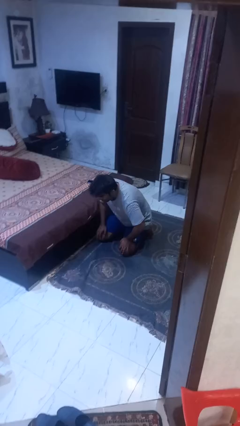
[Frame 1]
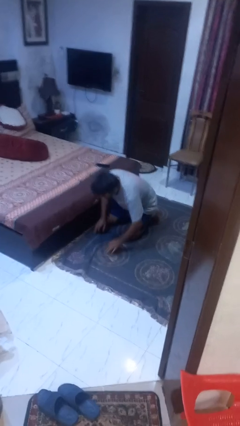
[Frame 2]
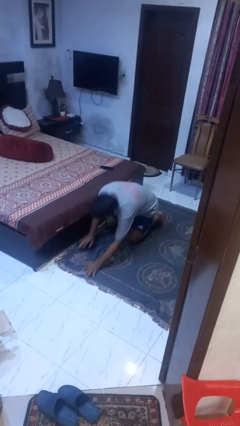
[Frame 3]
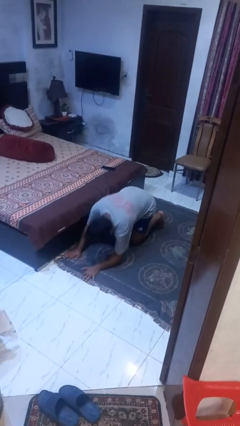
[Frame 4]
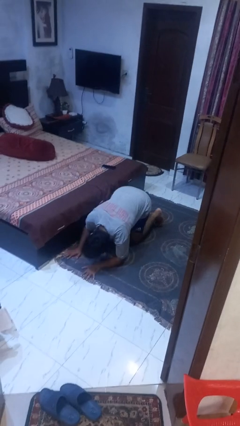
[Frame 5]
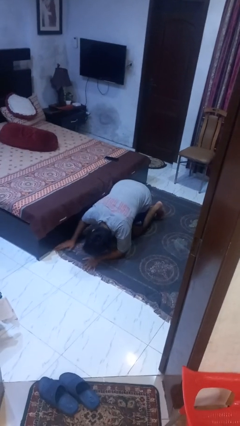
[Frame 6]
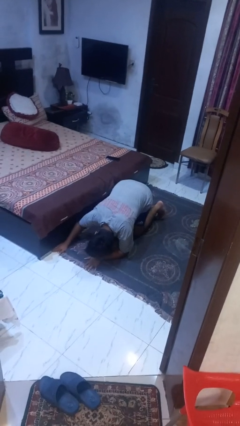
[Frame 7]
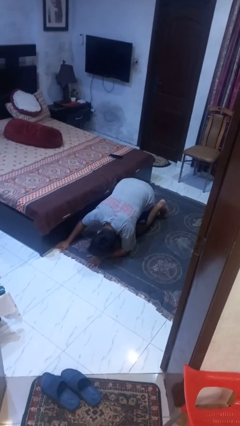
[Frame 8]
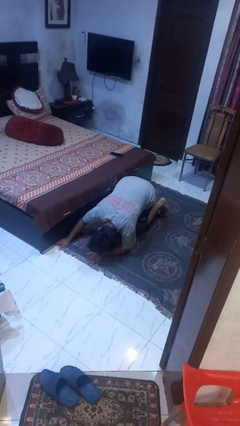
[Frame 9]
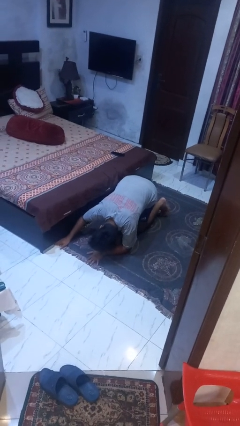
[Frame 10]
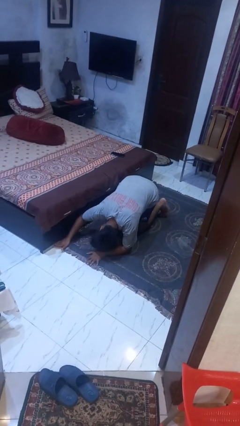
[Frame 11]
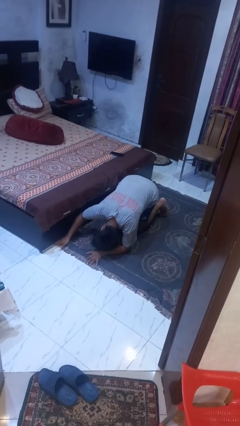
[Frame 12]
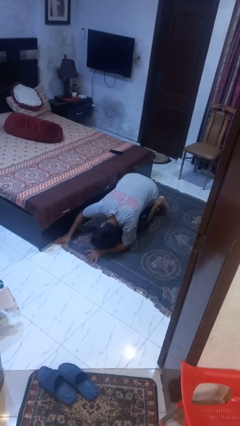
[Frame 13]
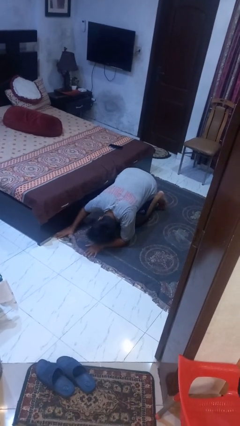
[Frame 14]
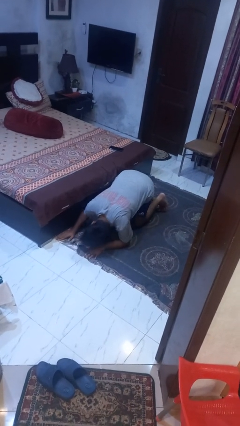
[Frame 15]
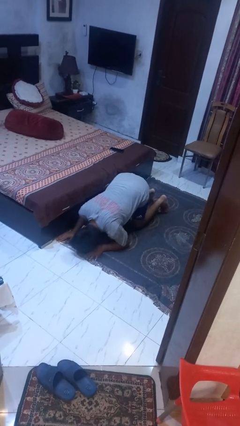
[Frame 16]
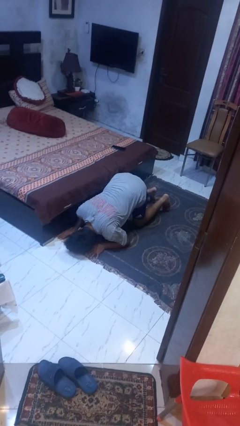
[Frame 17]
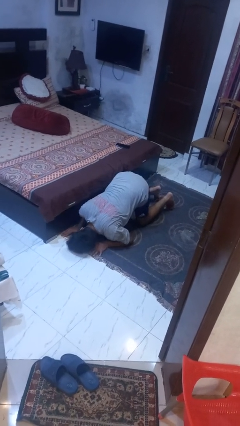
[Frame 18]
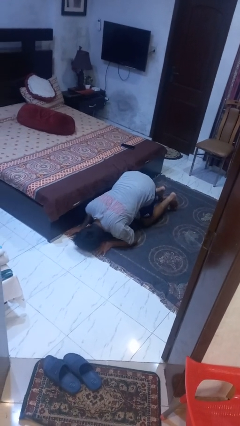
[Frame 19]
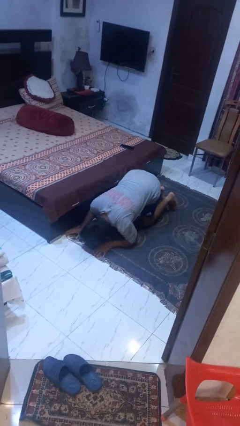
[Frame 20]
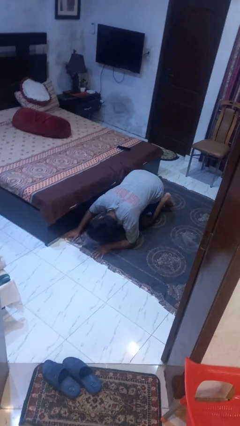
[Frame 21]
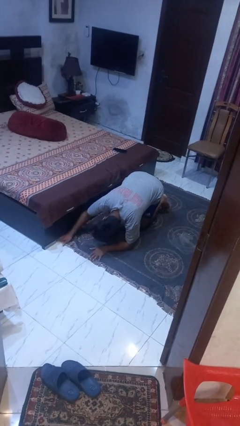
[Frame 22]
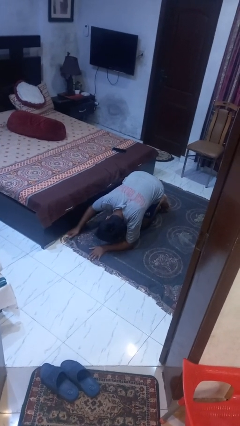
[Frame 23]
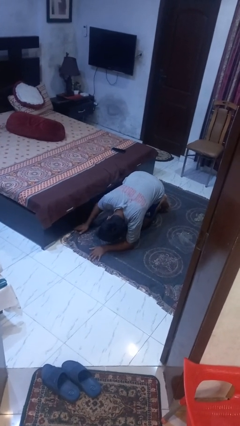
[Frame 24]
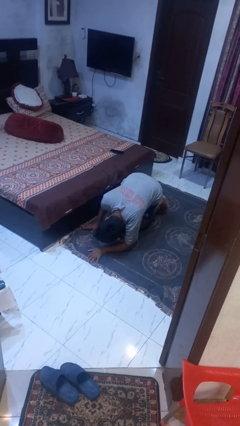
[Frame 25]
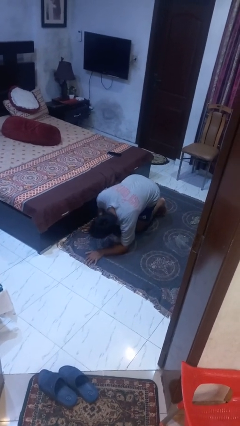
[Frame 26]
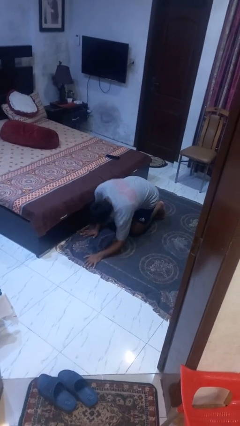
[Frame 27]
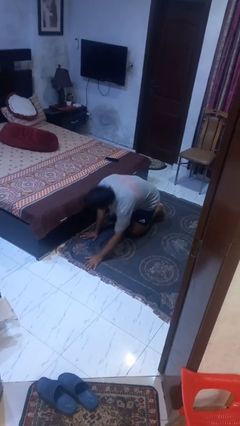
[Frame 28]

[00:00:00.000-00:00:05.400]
person searches under bed

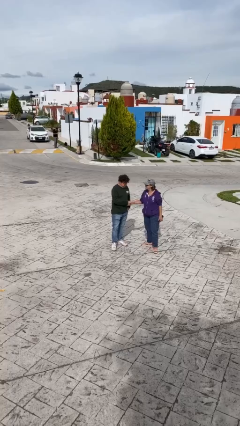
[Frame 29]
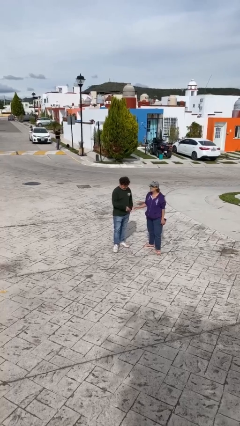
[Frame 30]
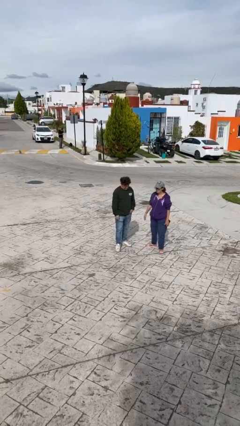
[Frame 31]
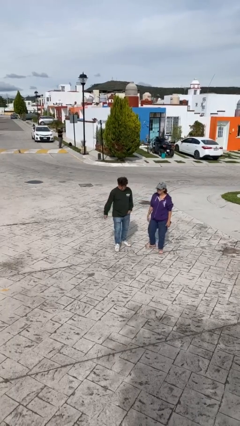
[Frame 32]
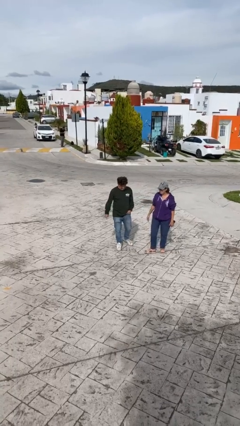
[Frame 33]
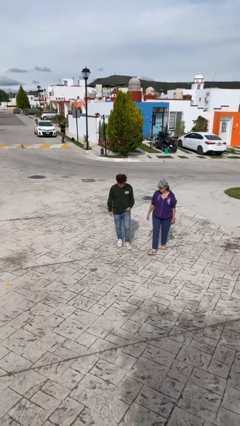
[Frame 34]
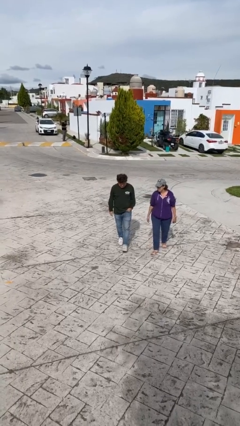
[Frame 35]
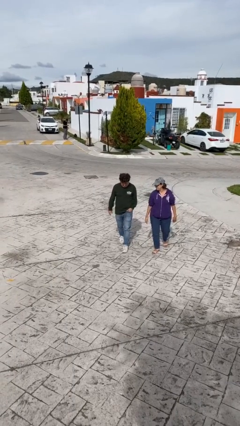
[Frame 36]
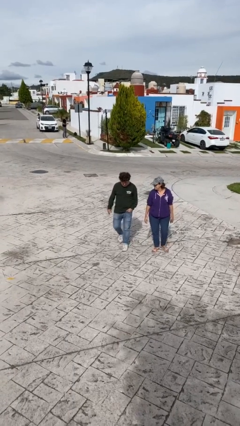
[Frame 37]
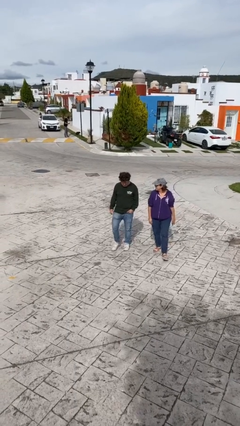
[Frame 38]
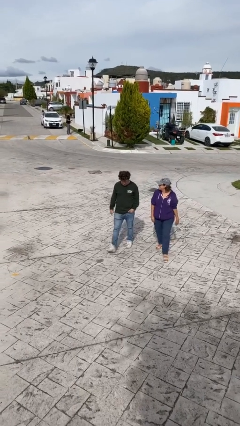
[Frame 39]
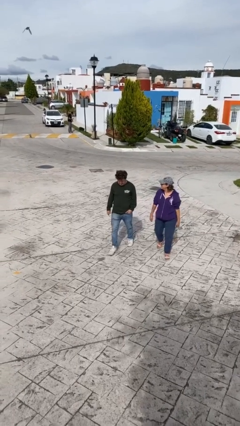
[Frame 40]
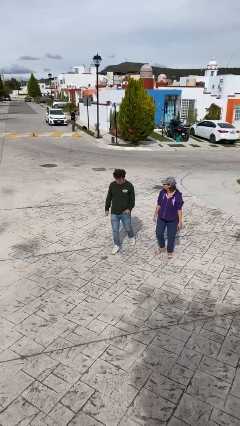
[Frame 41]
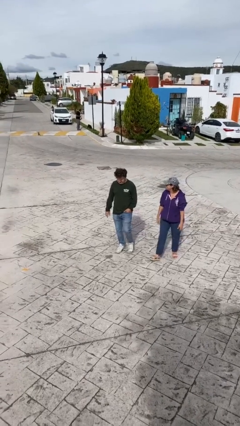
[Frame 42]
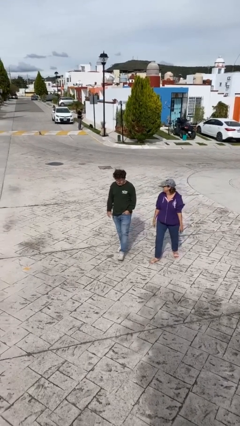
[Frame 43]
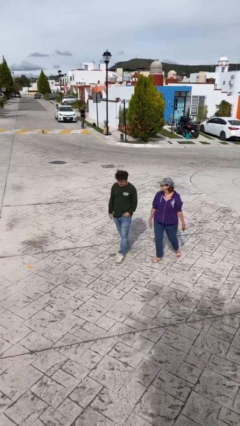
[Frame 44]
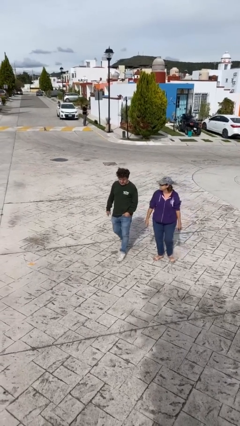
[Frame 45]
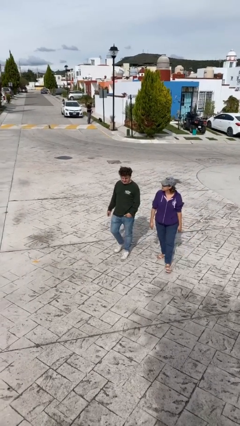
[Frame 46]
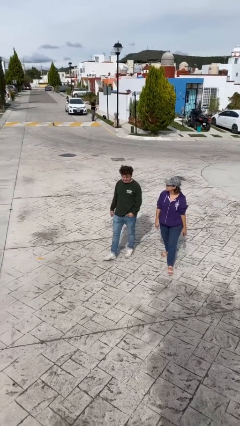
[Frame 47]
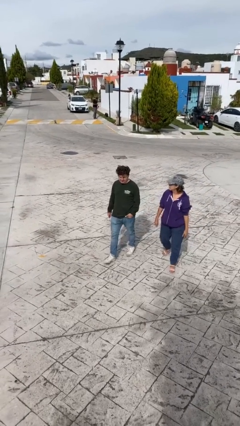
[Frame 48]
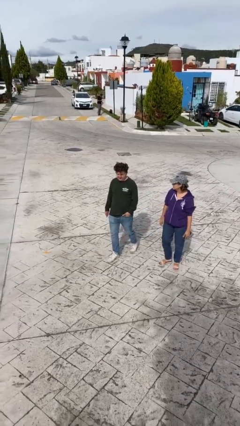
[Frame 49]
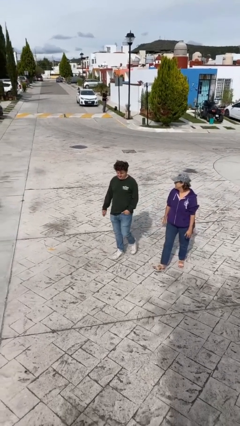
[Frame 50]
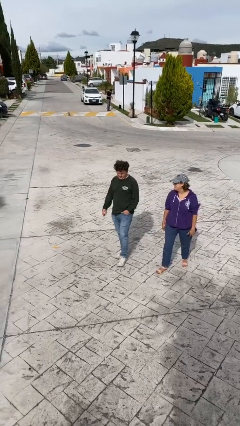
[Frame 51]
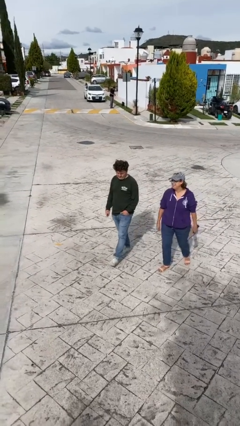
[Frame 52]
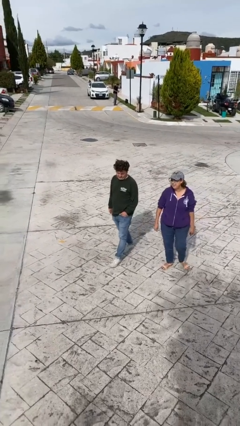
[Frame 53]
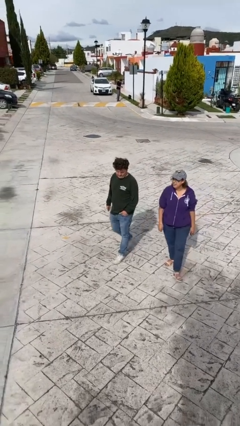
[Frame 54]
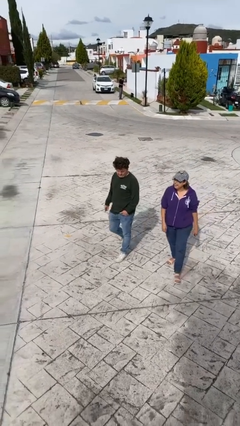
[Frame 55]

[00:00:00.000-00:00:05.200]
person talks to person

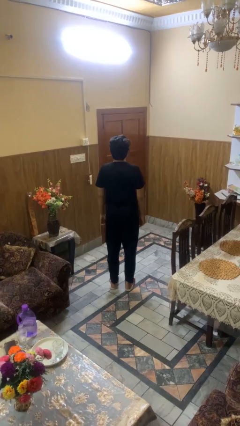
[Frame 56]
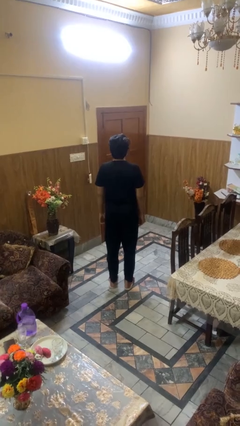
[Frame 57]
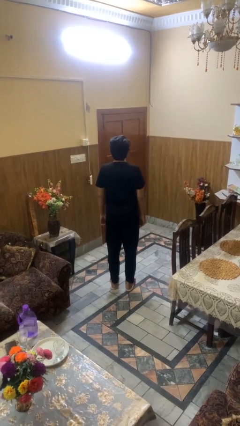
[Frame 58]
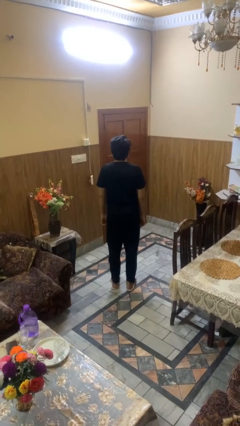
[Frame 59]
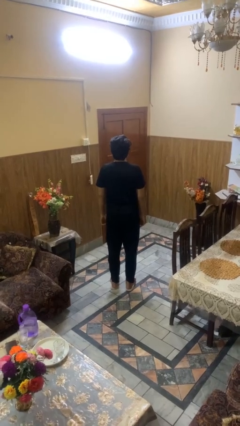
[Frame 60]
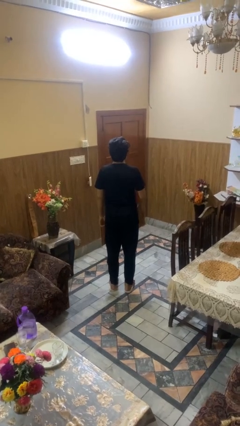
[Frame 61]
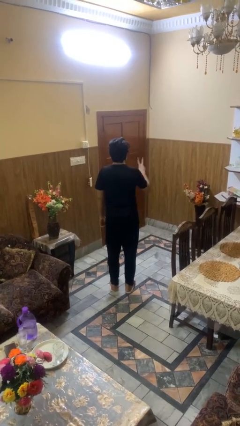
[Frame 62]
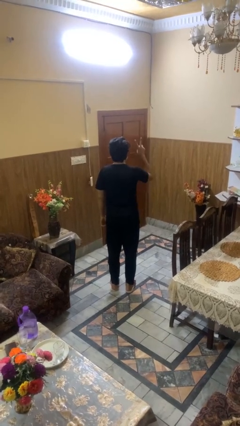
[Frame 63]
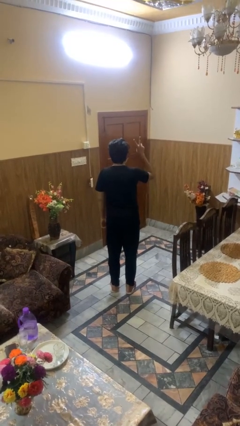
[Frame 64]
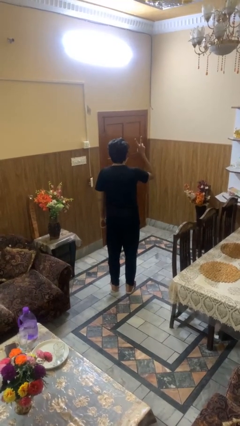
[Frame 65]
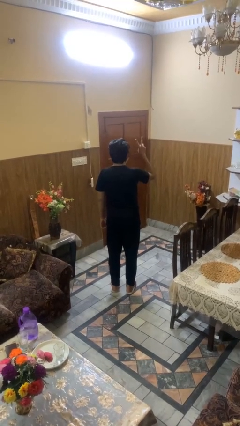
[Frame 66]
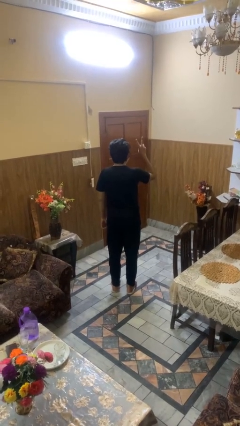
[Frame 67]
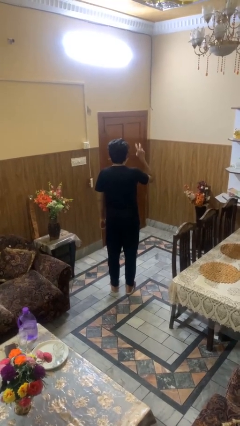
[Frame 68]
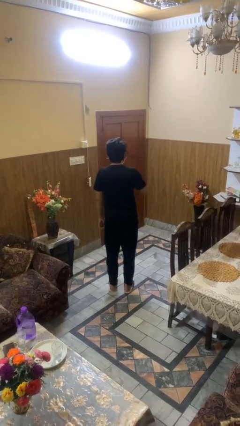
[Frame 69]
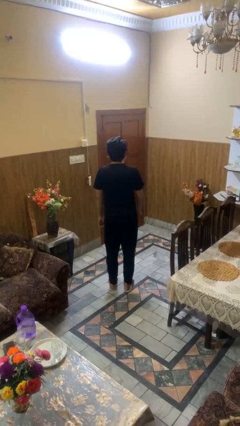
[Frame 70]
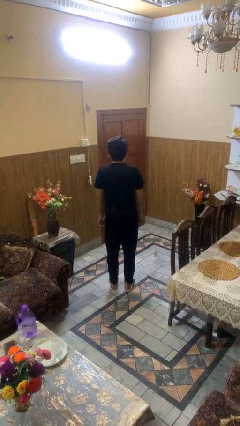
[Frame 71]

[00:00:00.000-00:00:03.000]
person gestures peace

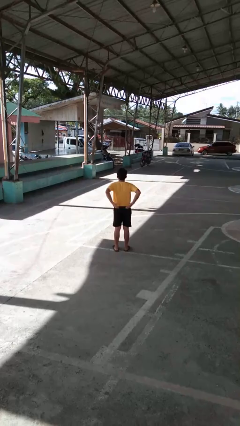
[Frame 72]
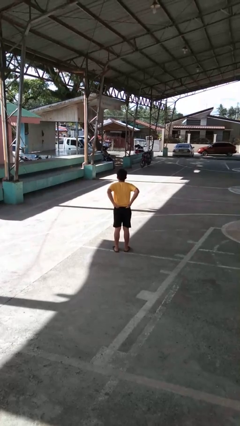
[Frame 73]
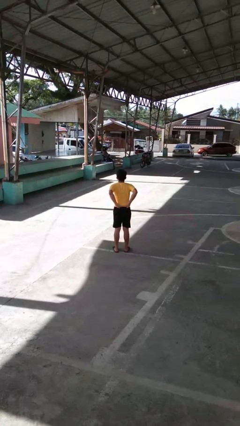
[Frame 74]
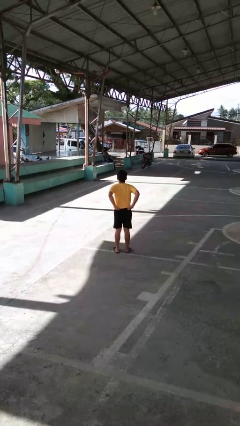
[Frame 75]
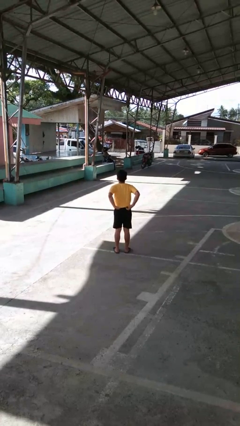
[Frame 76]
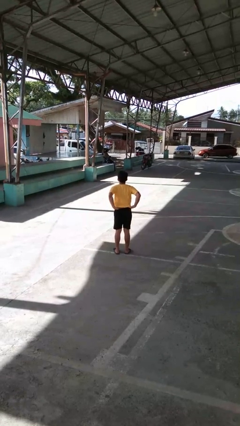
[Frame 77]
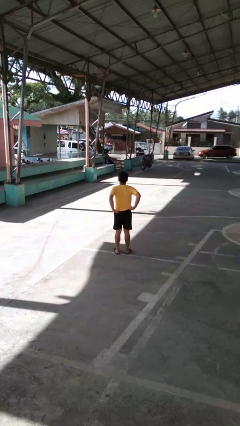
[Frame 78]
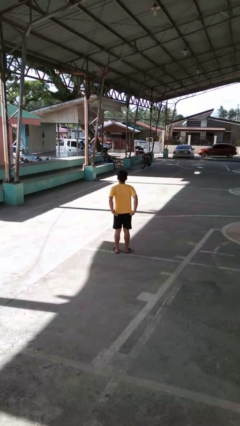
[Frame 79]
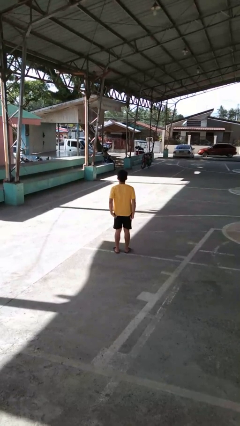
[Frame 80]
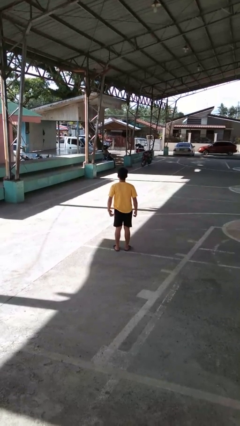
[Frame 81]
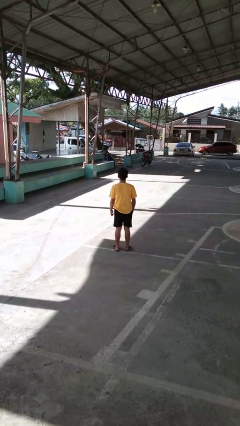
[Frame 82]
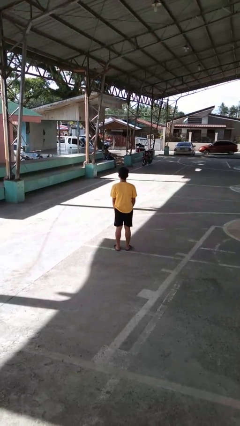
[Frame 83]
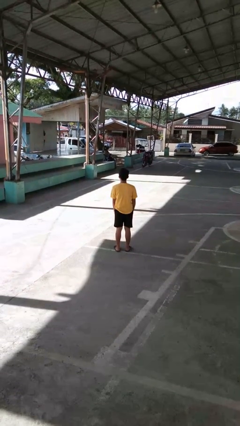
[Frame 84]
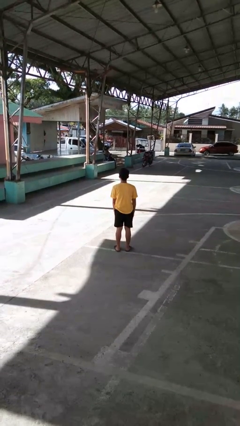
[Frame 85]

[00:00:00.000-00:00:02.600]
person untucks shirt

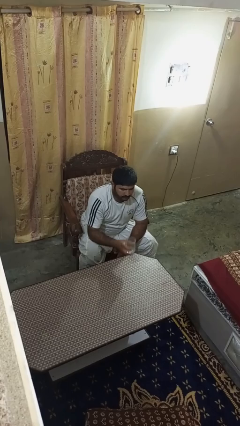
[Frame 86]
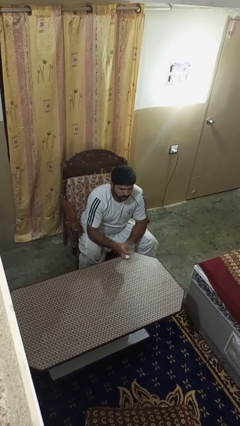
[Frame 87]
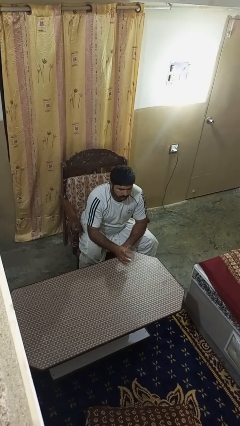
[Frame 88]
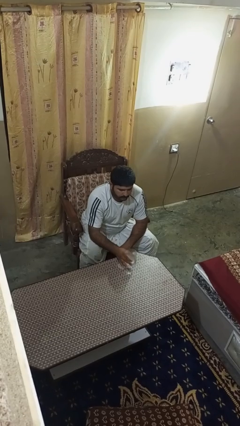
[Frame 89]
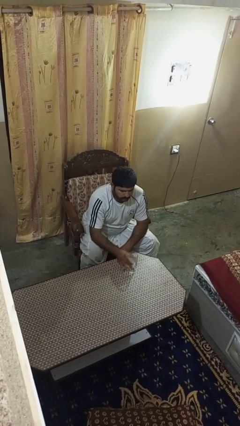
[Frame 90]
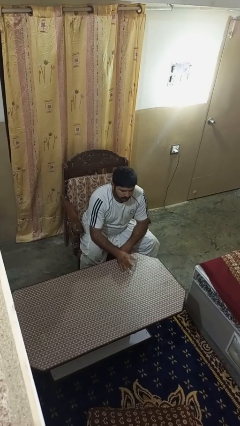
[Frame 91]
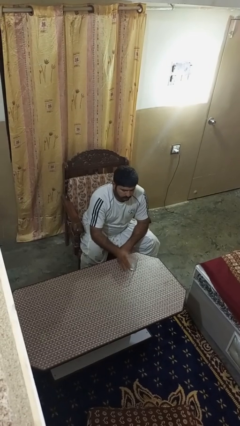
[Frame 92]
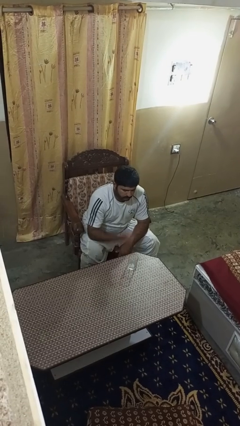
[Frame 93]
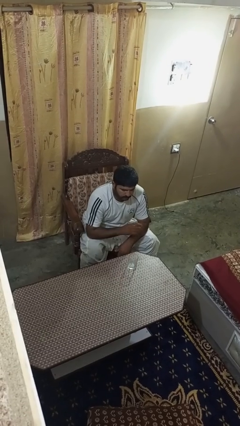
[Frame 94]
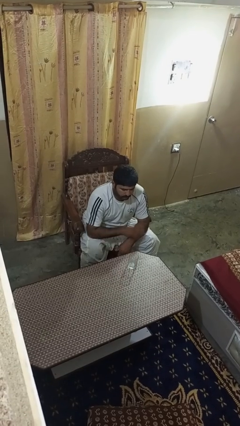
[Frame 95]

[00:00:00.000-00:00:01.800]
person puts down object on table
